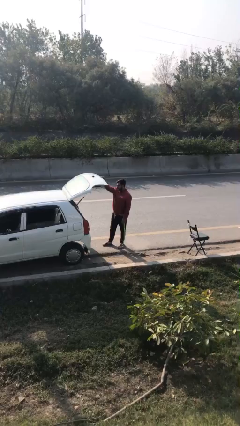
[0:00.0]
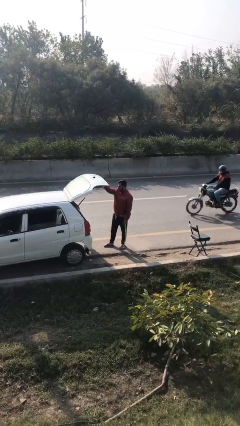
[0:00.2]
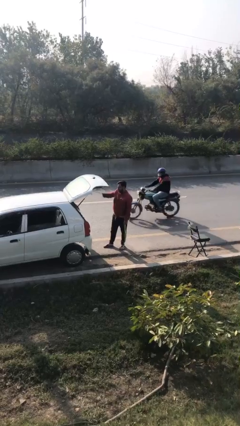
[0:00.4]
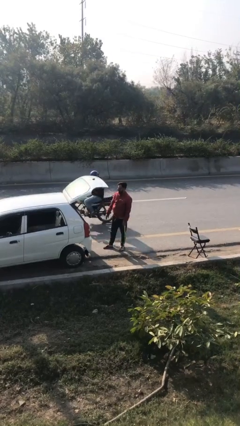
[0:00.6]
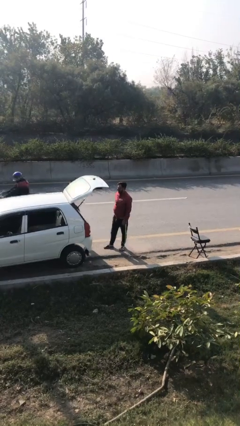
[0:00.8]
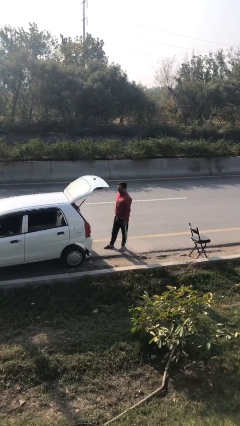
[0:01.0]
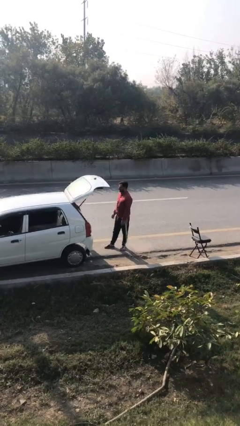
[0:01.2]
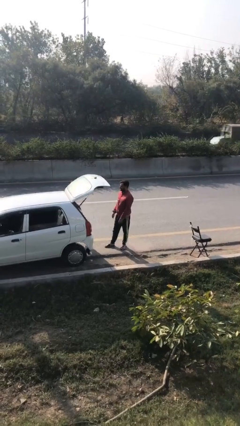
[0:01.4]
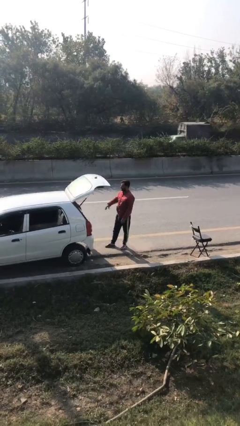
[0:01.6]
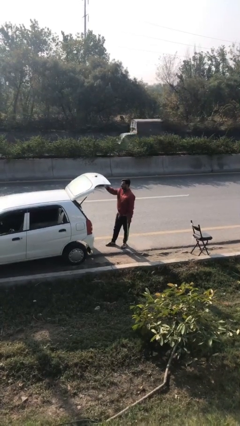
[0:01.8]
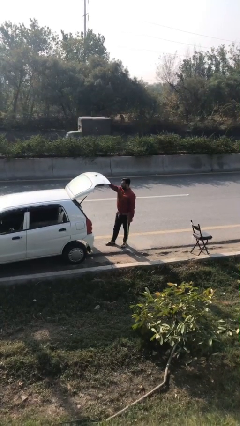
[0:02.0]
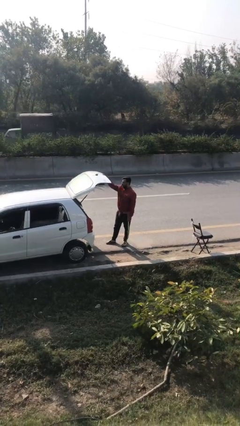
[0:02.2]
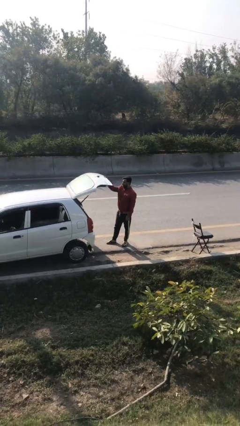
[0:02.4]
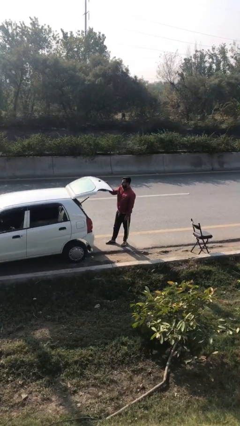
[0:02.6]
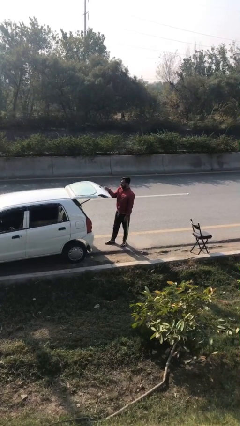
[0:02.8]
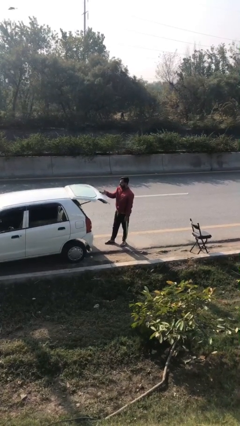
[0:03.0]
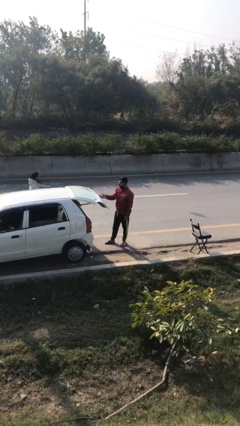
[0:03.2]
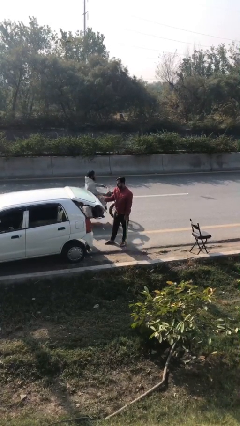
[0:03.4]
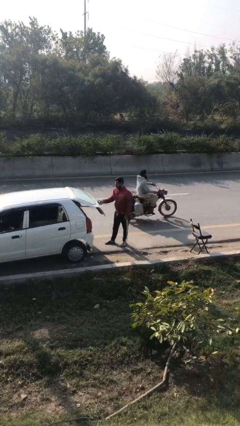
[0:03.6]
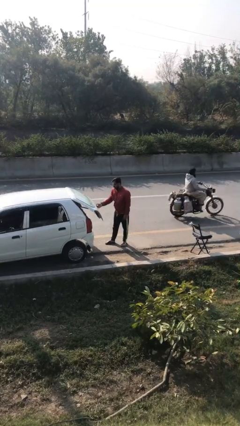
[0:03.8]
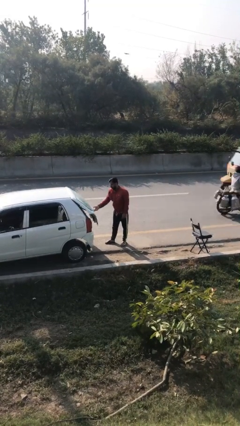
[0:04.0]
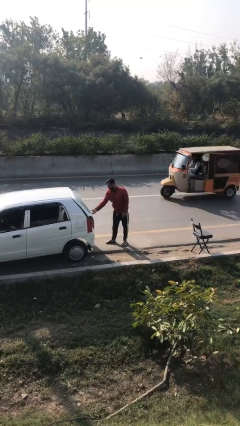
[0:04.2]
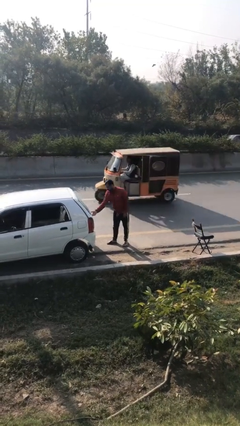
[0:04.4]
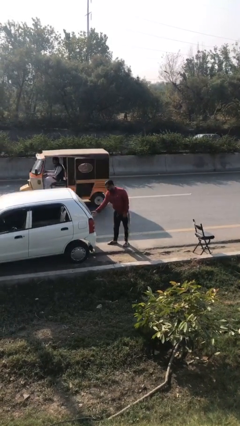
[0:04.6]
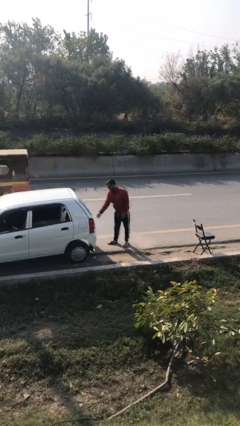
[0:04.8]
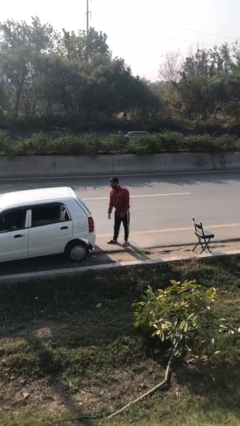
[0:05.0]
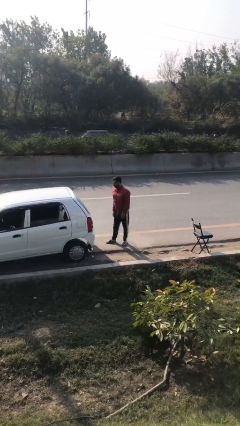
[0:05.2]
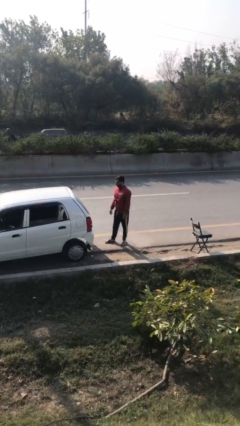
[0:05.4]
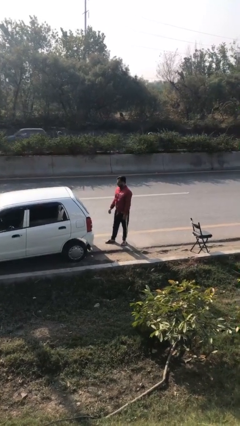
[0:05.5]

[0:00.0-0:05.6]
person closes car trunk

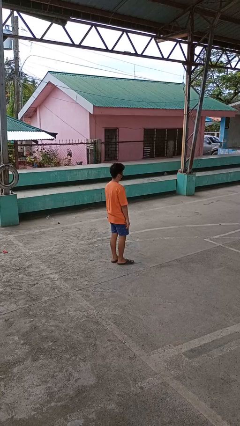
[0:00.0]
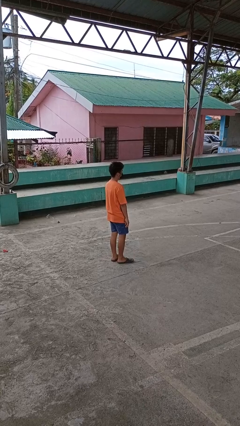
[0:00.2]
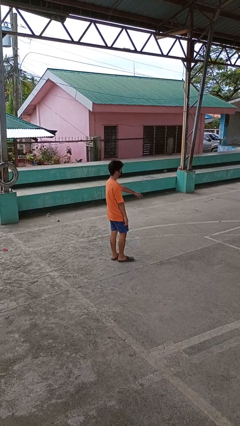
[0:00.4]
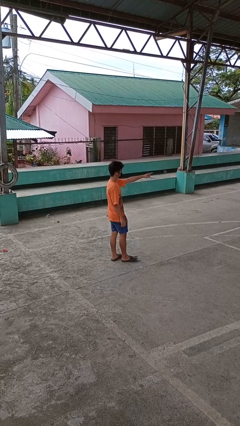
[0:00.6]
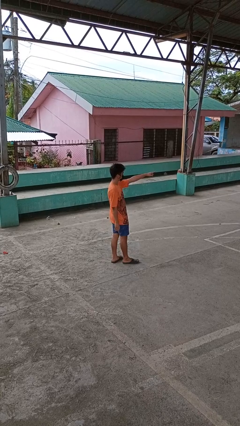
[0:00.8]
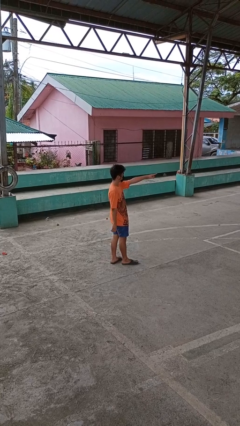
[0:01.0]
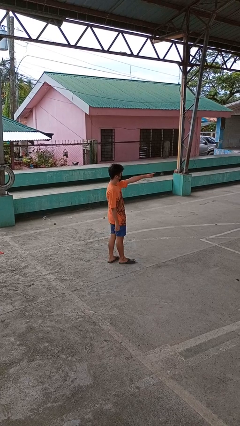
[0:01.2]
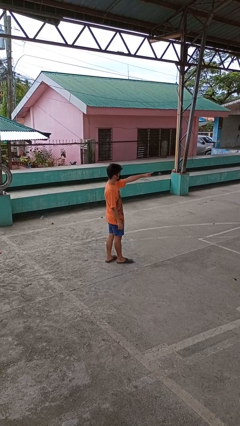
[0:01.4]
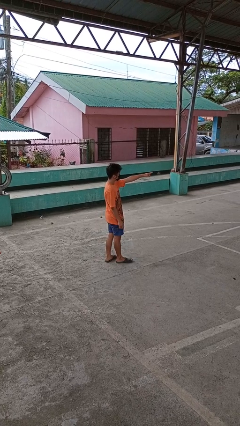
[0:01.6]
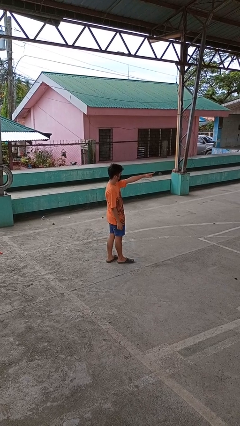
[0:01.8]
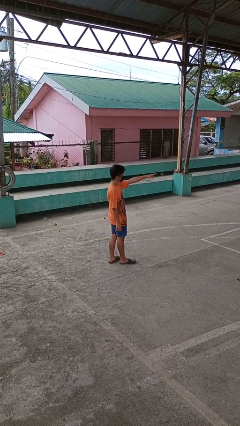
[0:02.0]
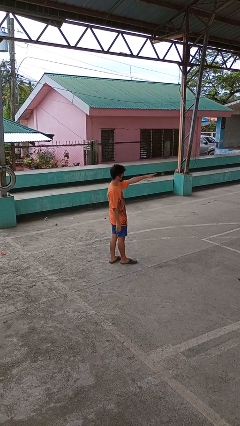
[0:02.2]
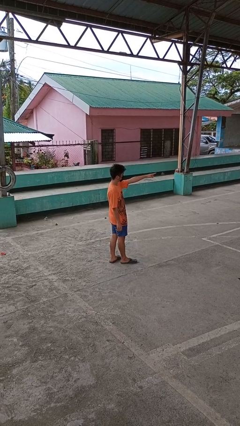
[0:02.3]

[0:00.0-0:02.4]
person points at person

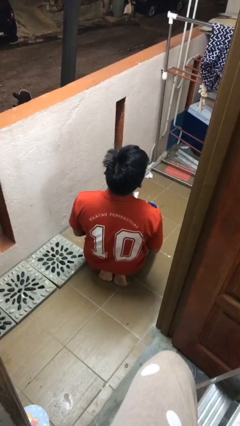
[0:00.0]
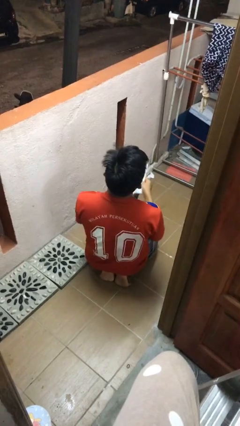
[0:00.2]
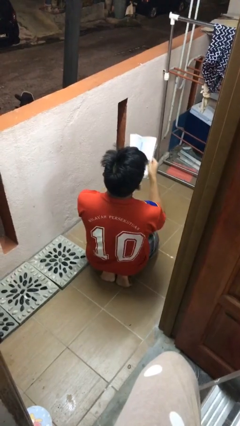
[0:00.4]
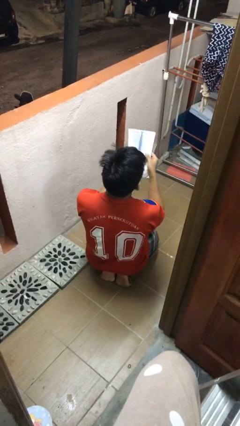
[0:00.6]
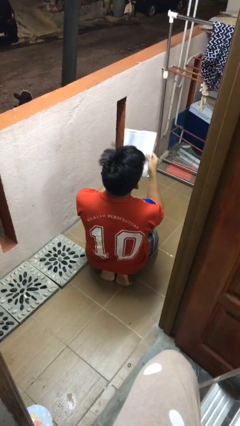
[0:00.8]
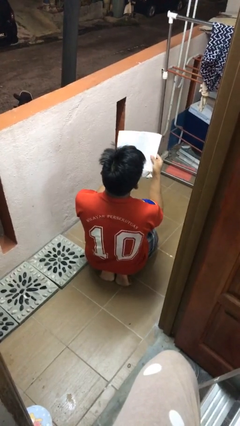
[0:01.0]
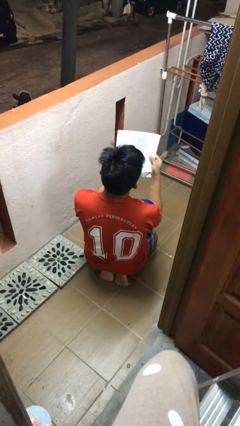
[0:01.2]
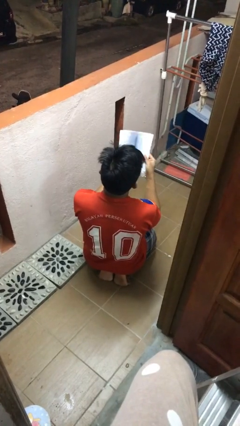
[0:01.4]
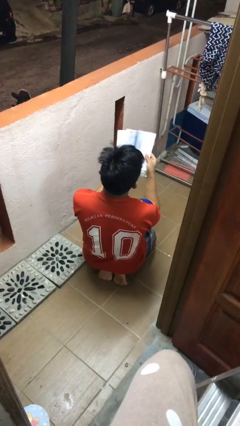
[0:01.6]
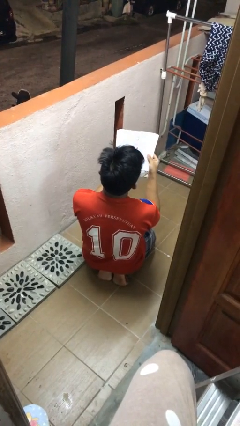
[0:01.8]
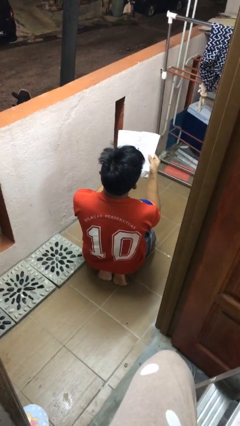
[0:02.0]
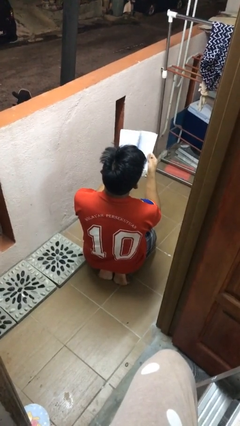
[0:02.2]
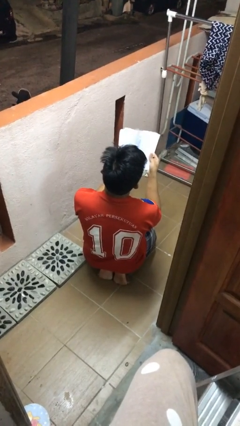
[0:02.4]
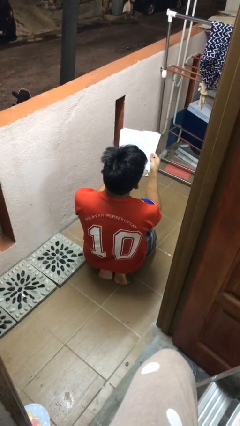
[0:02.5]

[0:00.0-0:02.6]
person reads book

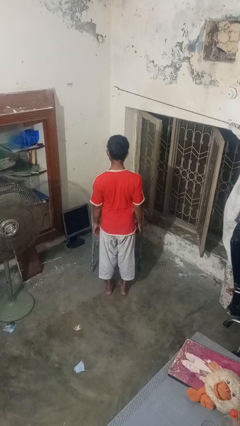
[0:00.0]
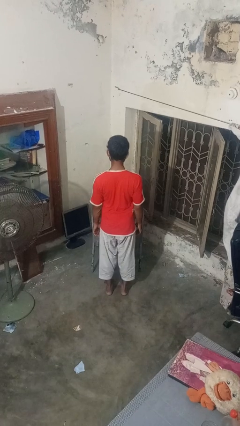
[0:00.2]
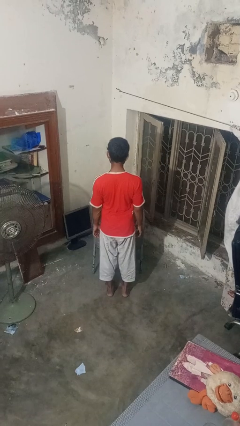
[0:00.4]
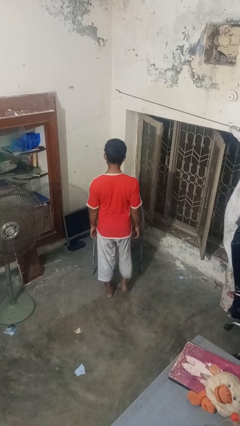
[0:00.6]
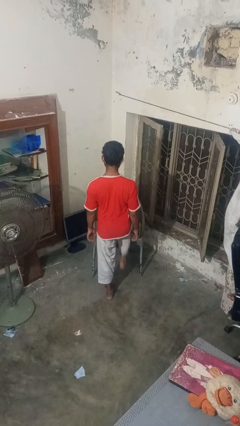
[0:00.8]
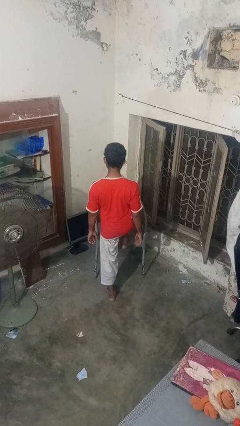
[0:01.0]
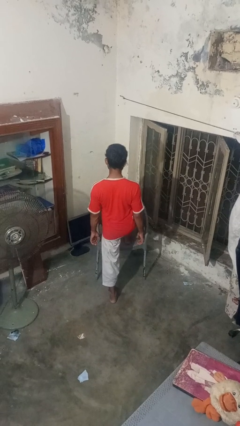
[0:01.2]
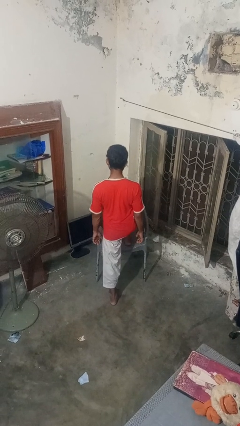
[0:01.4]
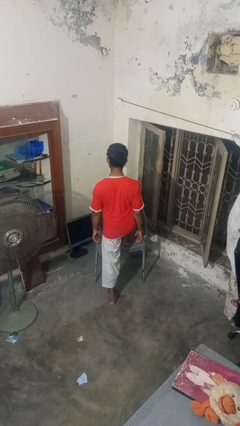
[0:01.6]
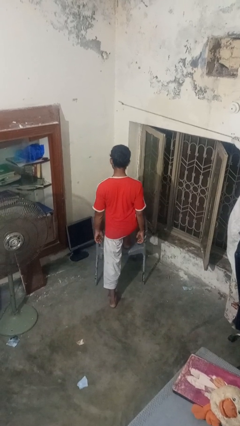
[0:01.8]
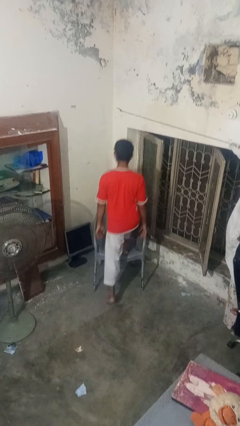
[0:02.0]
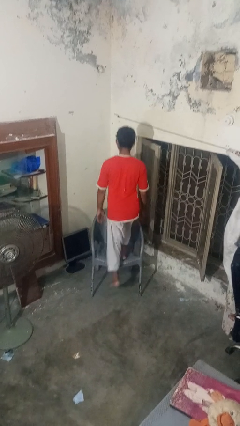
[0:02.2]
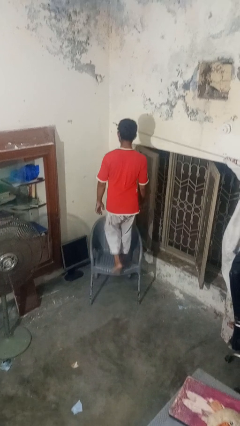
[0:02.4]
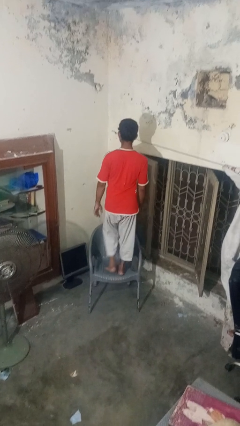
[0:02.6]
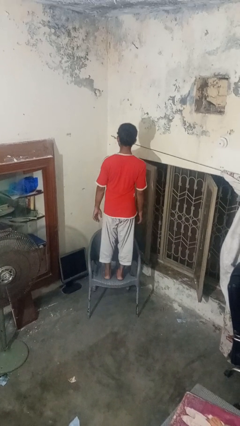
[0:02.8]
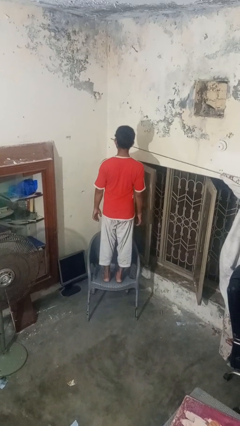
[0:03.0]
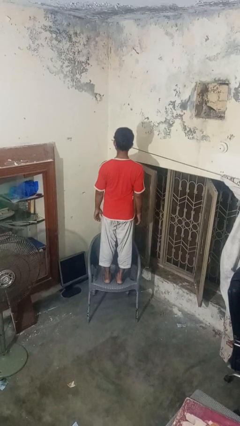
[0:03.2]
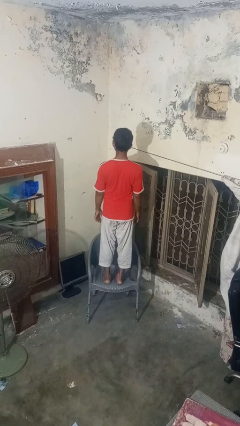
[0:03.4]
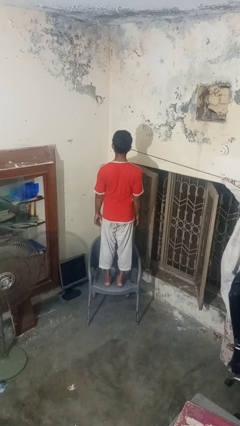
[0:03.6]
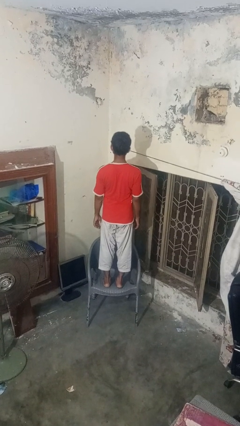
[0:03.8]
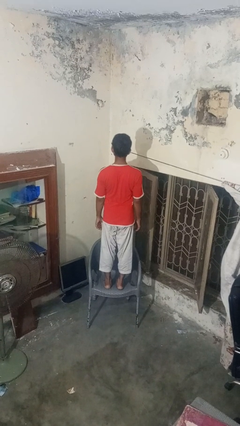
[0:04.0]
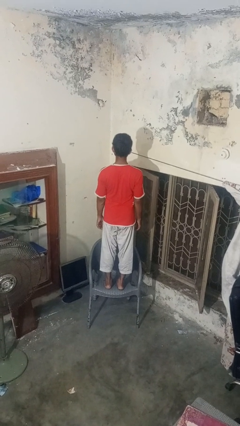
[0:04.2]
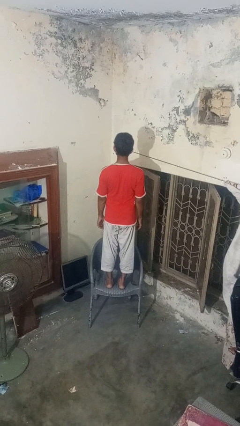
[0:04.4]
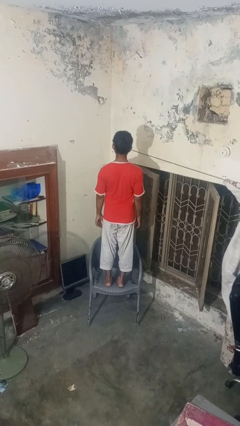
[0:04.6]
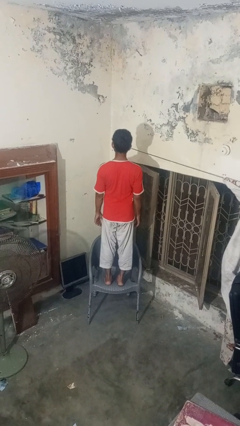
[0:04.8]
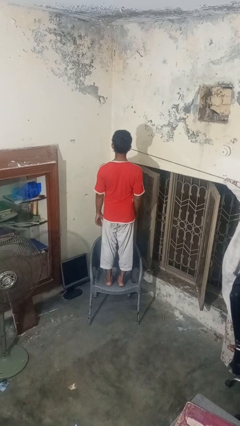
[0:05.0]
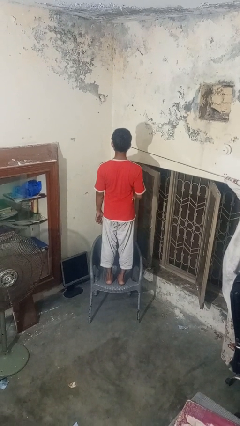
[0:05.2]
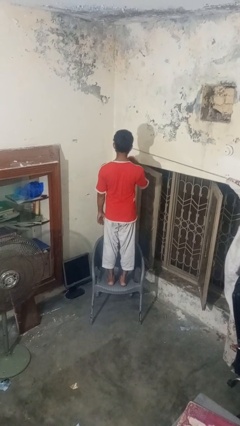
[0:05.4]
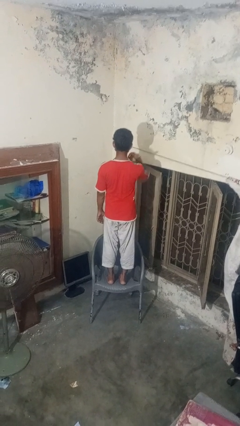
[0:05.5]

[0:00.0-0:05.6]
person climbs on chair

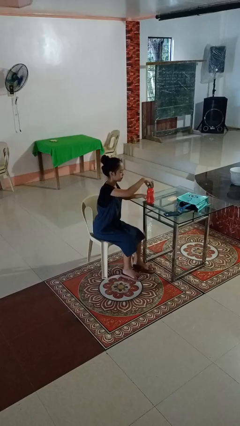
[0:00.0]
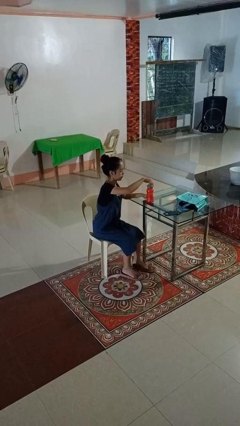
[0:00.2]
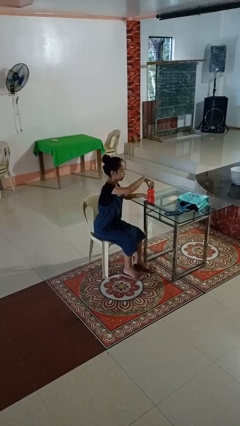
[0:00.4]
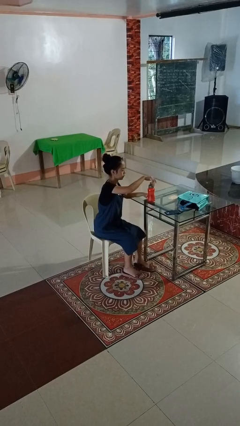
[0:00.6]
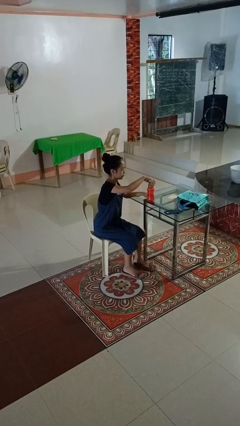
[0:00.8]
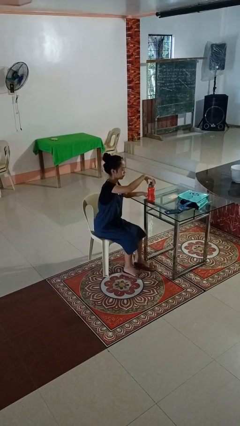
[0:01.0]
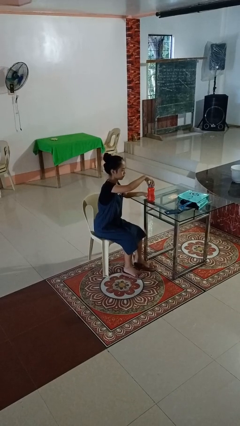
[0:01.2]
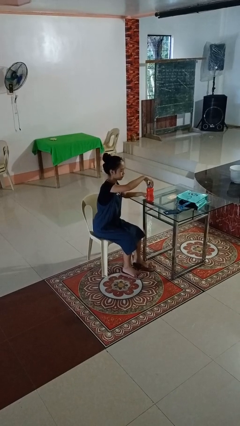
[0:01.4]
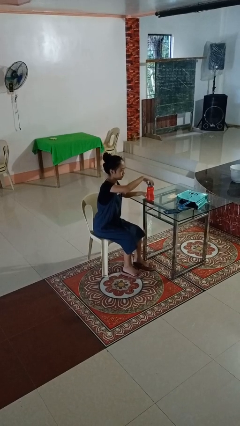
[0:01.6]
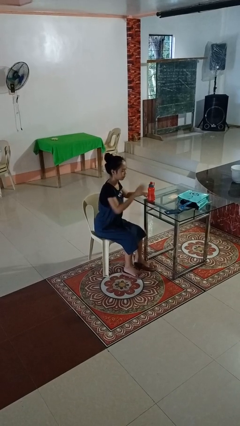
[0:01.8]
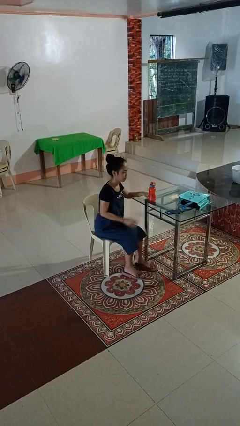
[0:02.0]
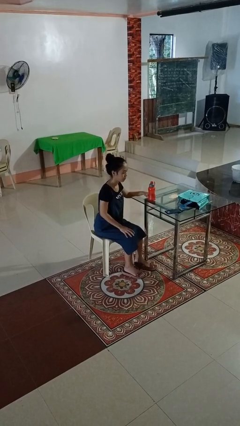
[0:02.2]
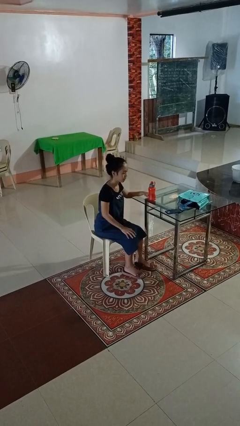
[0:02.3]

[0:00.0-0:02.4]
person screws lid to bottle
